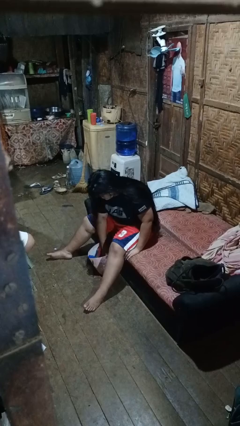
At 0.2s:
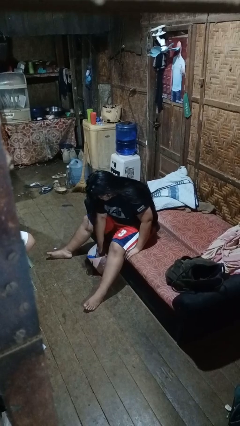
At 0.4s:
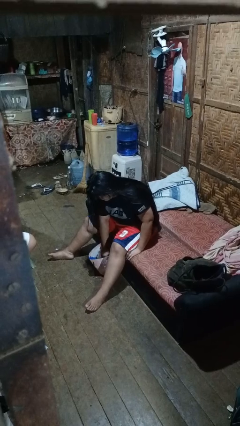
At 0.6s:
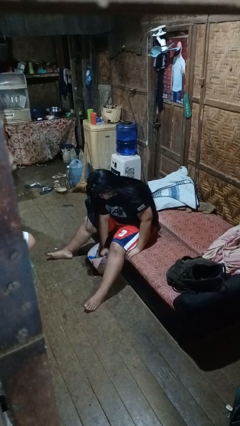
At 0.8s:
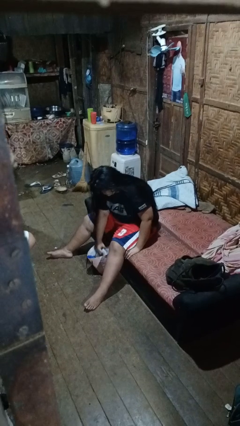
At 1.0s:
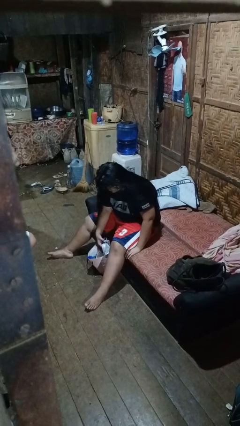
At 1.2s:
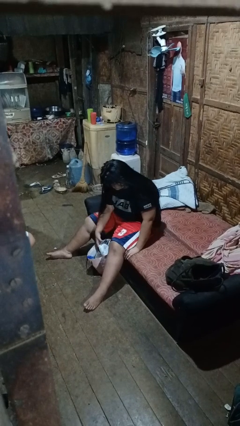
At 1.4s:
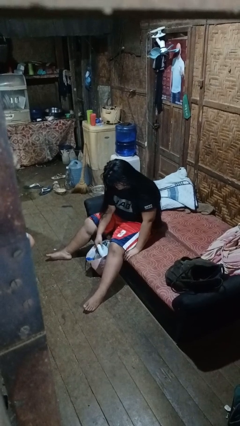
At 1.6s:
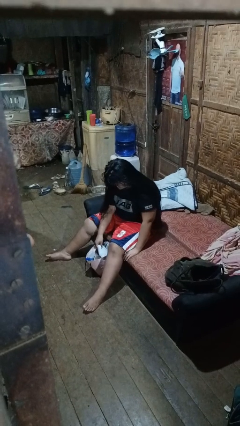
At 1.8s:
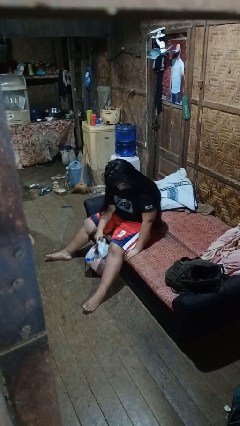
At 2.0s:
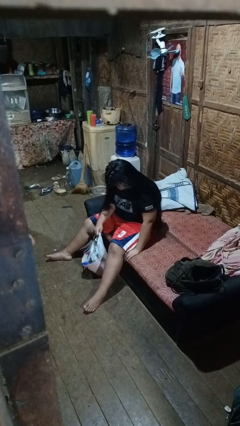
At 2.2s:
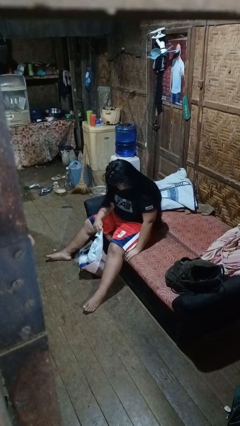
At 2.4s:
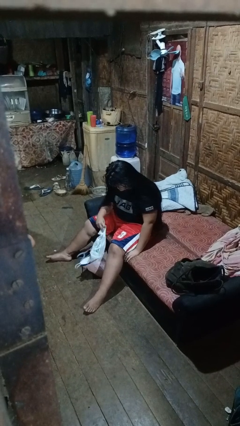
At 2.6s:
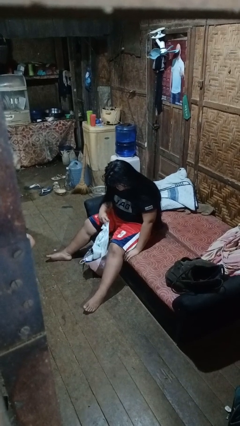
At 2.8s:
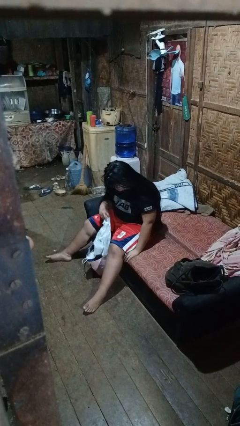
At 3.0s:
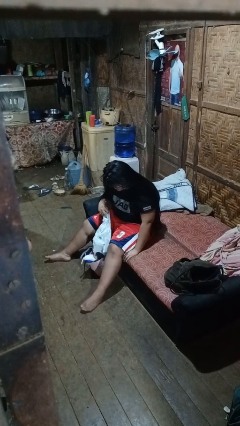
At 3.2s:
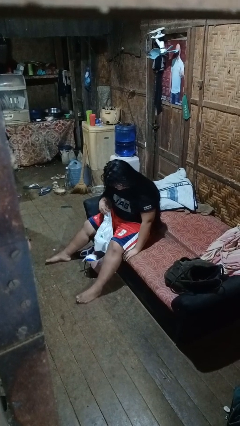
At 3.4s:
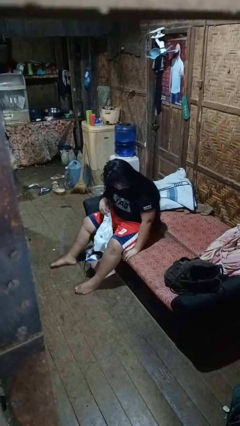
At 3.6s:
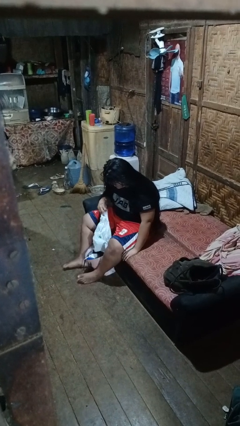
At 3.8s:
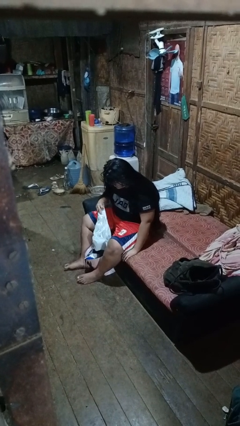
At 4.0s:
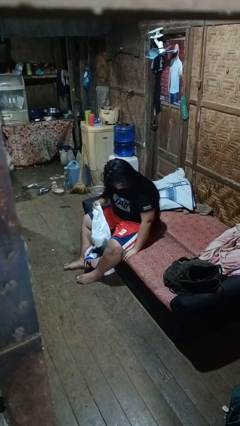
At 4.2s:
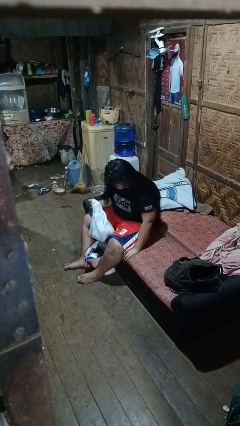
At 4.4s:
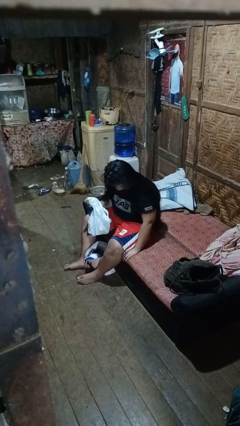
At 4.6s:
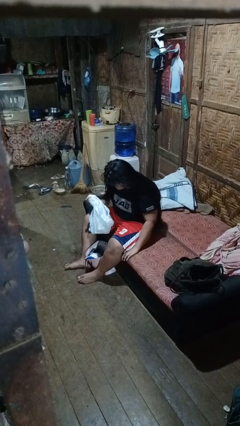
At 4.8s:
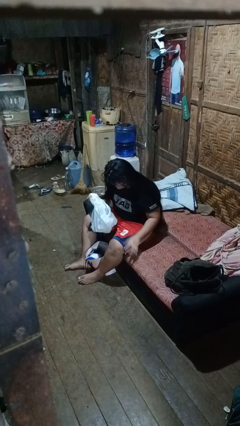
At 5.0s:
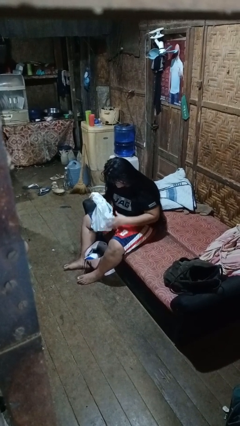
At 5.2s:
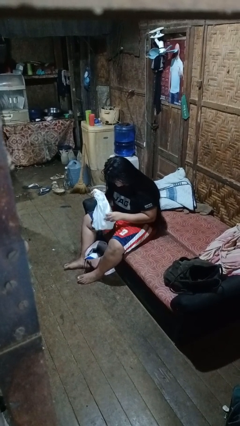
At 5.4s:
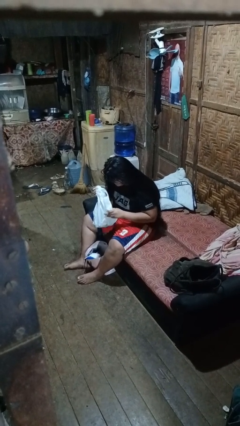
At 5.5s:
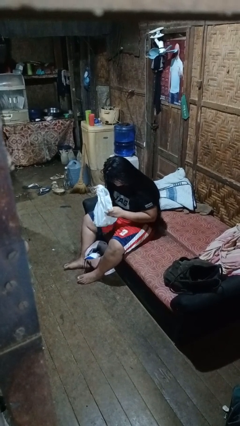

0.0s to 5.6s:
person takes object from bag

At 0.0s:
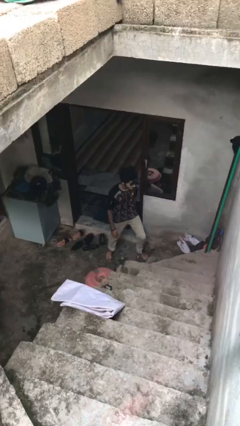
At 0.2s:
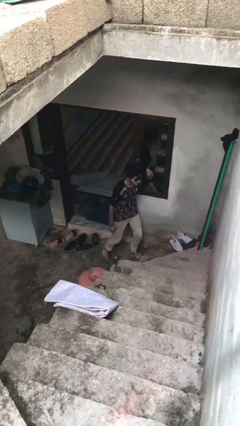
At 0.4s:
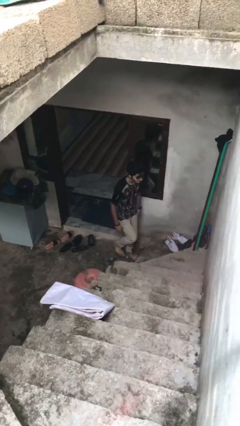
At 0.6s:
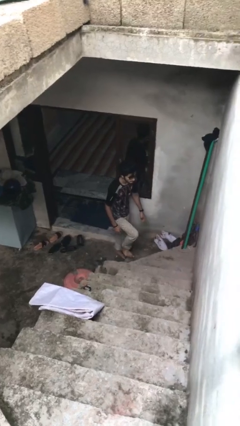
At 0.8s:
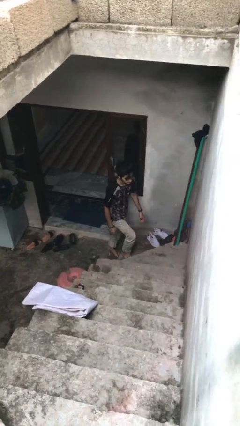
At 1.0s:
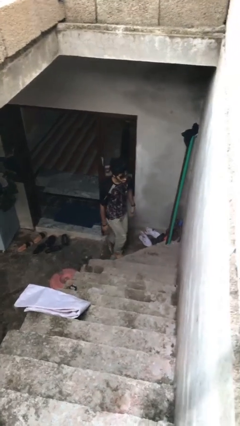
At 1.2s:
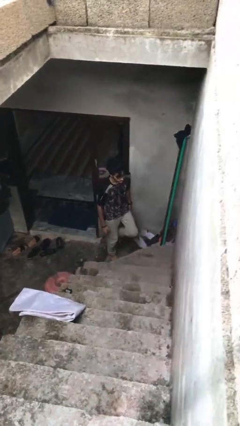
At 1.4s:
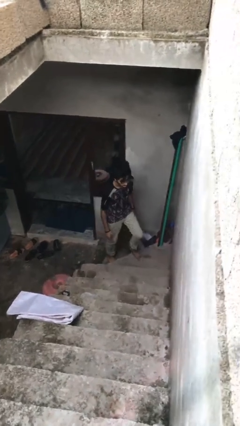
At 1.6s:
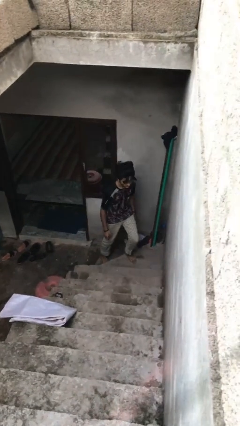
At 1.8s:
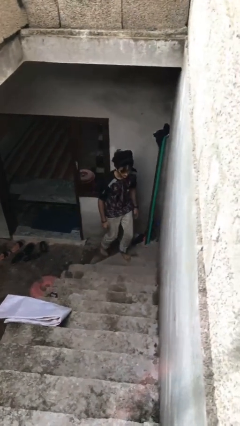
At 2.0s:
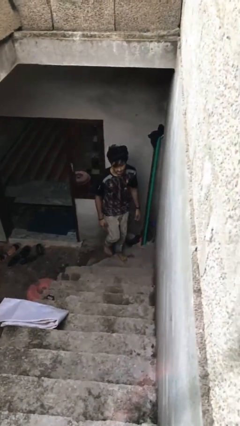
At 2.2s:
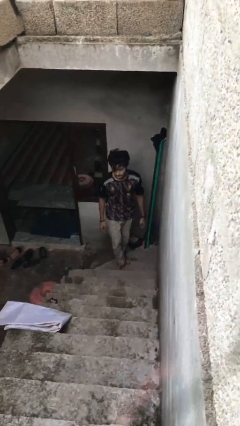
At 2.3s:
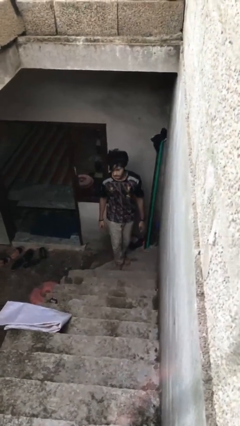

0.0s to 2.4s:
person climbs up stairs

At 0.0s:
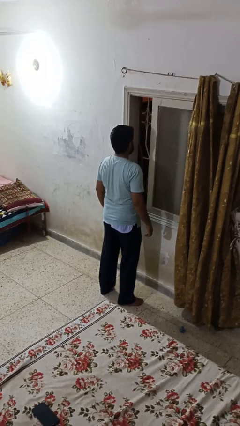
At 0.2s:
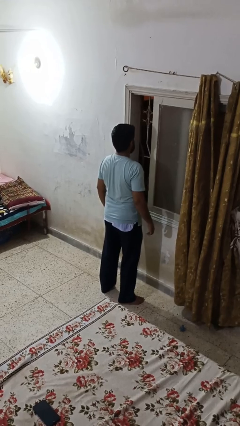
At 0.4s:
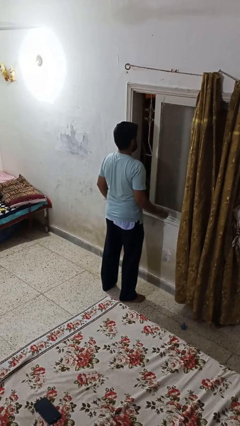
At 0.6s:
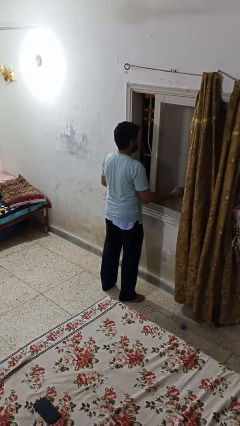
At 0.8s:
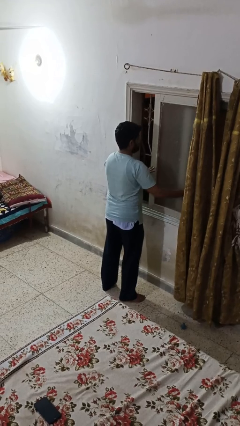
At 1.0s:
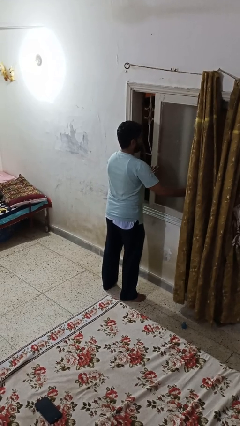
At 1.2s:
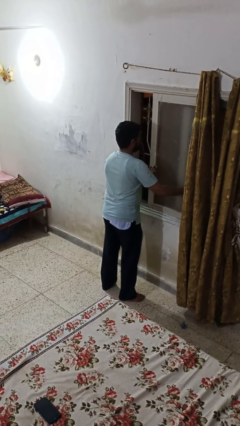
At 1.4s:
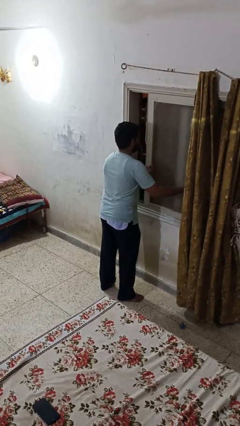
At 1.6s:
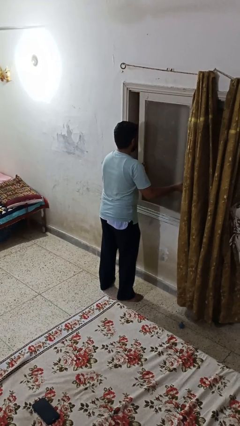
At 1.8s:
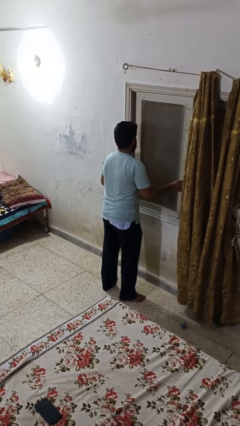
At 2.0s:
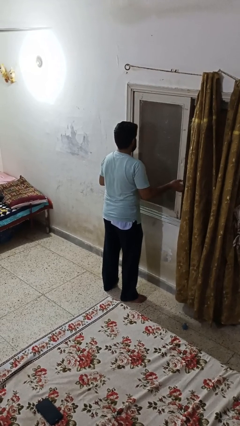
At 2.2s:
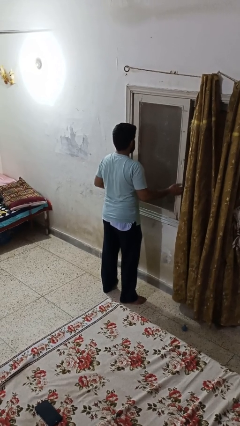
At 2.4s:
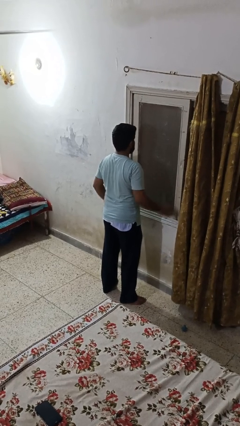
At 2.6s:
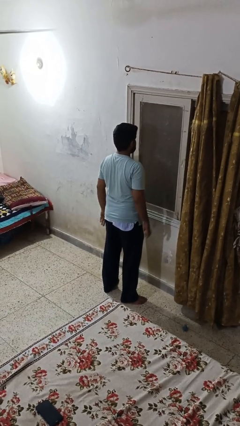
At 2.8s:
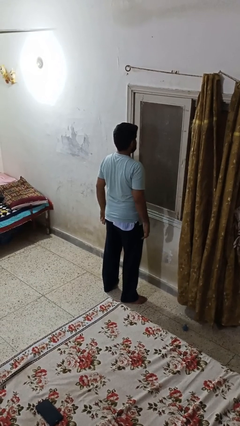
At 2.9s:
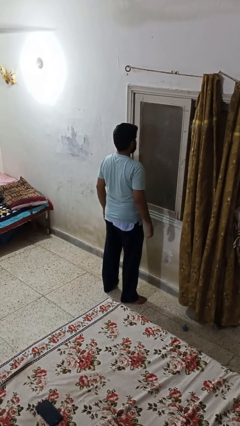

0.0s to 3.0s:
person closes sliding door

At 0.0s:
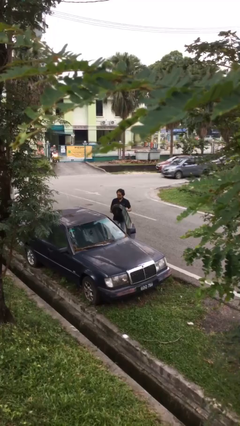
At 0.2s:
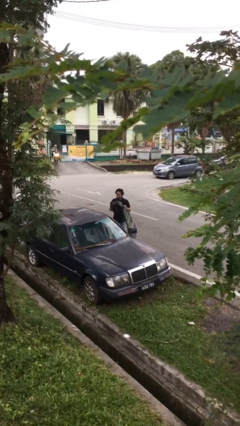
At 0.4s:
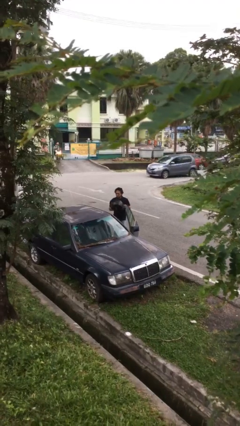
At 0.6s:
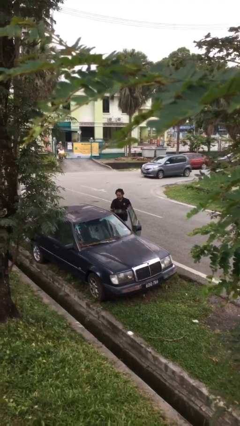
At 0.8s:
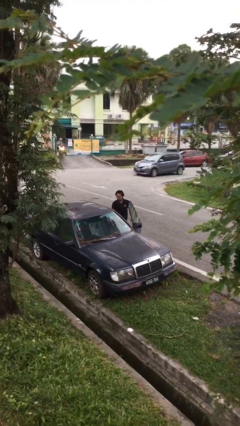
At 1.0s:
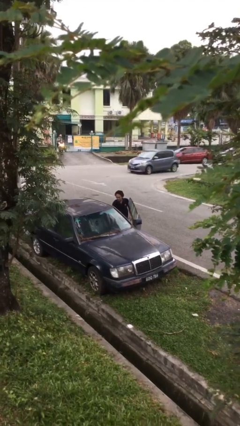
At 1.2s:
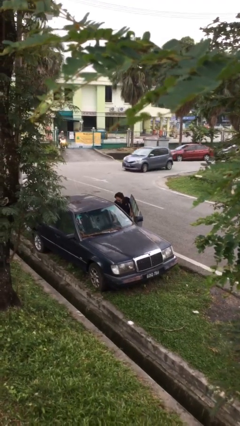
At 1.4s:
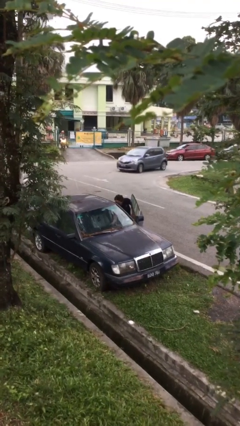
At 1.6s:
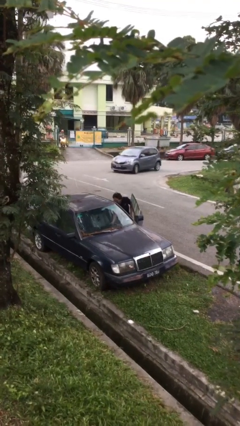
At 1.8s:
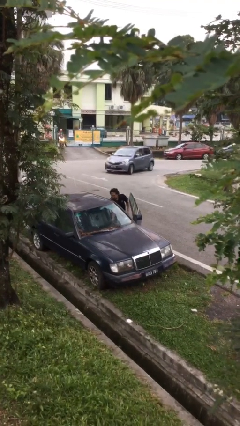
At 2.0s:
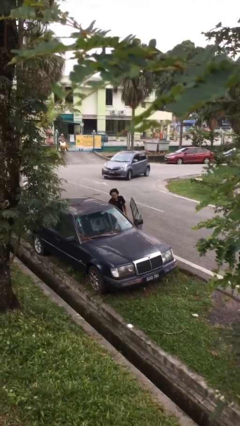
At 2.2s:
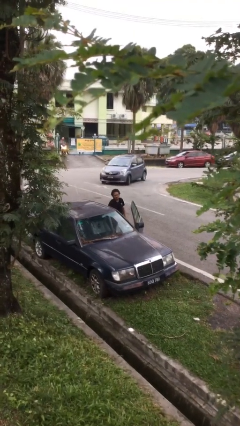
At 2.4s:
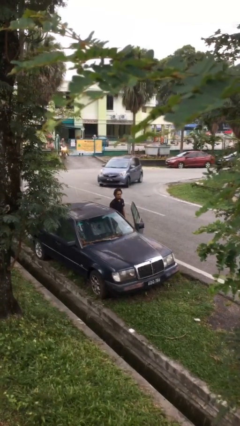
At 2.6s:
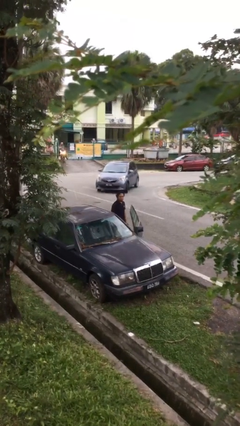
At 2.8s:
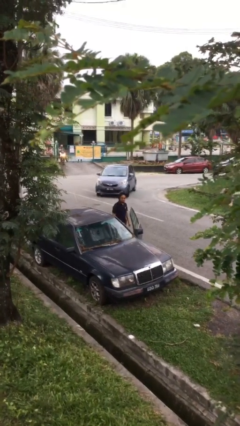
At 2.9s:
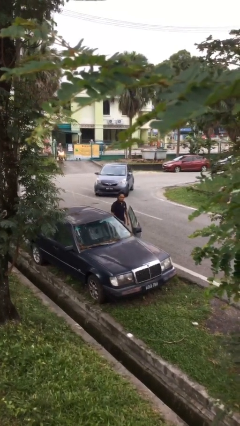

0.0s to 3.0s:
person loads car

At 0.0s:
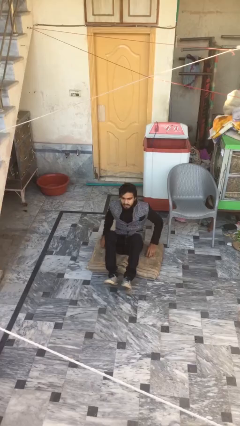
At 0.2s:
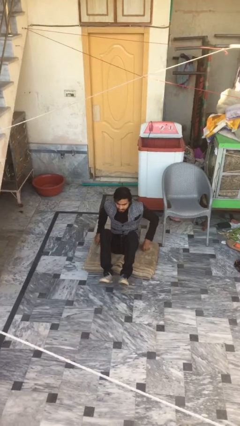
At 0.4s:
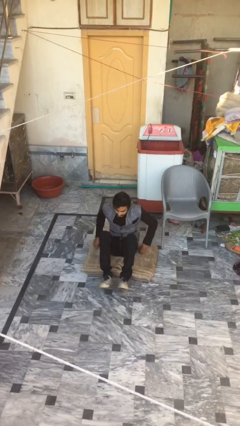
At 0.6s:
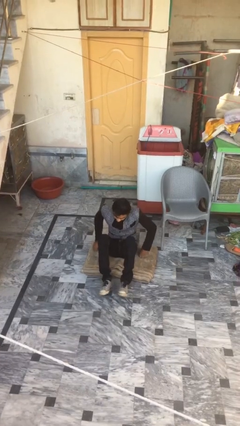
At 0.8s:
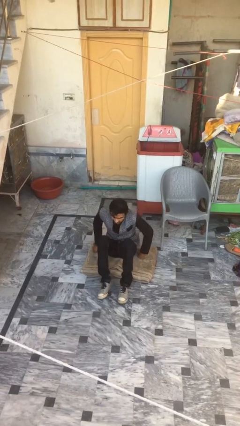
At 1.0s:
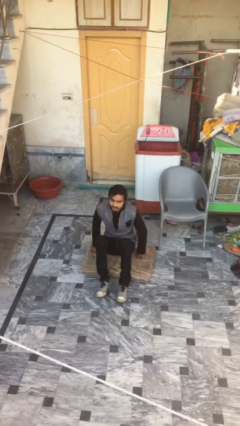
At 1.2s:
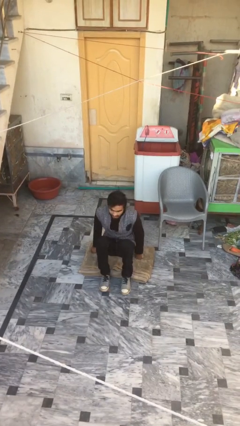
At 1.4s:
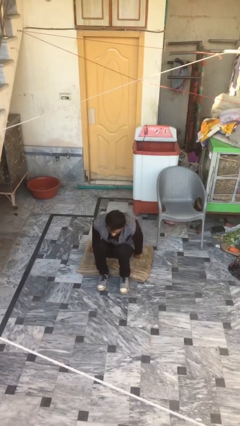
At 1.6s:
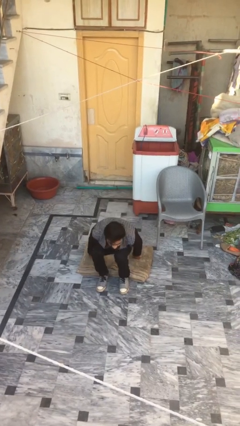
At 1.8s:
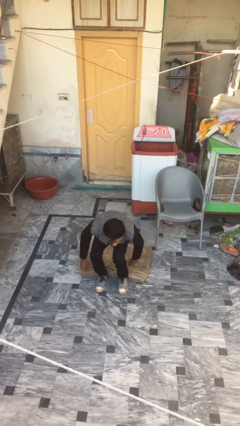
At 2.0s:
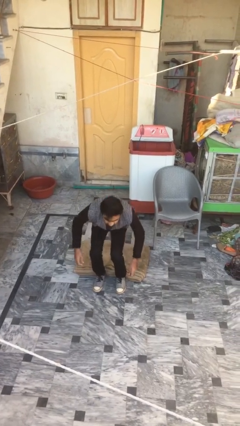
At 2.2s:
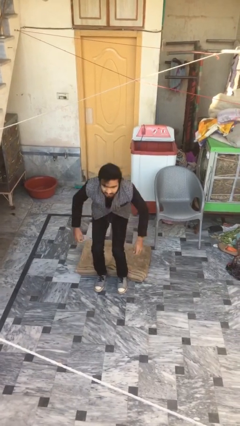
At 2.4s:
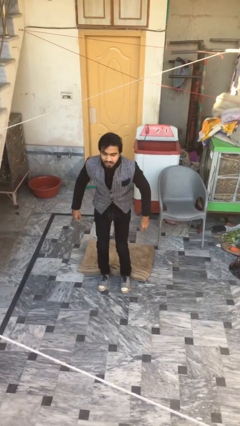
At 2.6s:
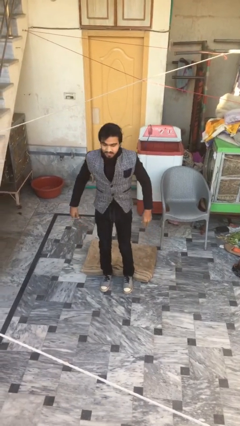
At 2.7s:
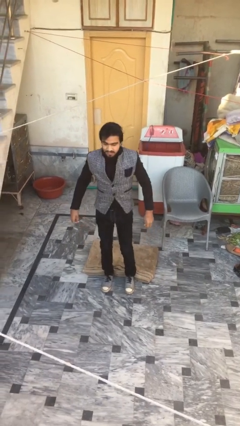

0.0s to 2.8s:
person stands up

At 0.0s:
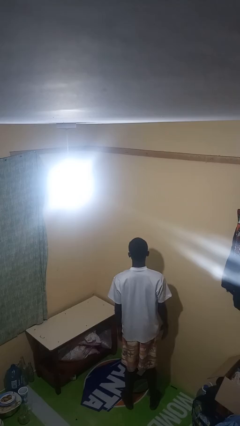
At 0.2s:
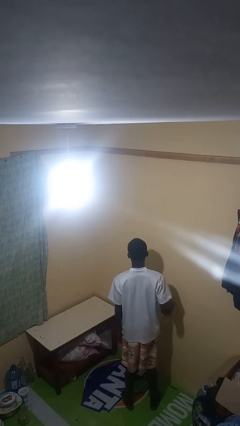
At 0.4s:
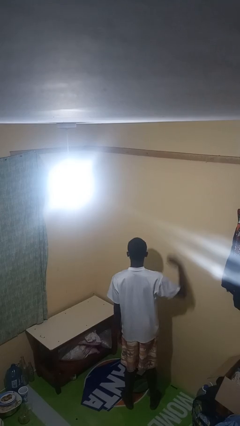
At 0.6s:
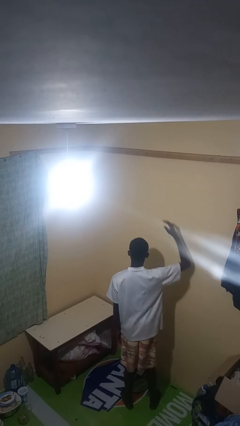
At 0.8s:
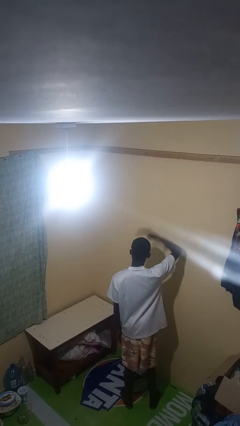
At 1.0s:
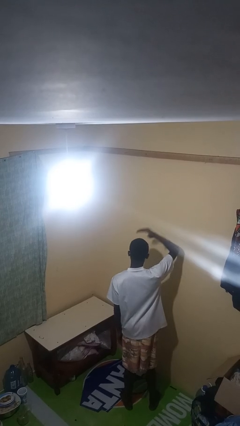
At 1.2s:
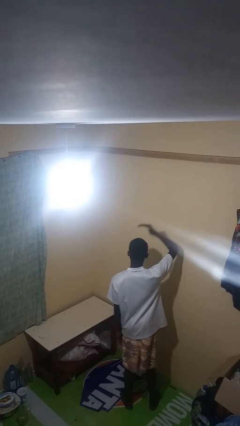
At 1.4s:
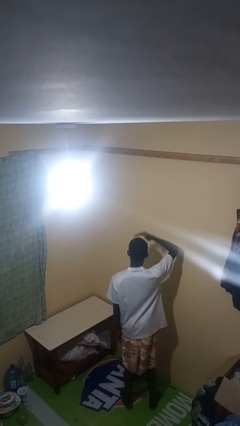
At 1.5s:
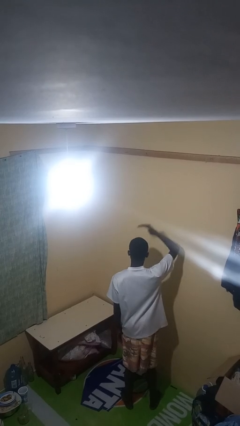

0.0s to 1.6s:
person pats head
